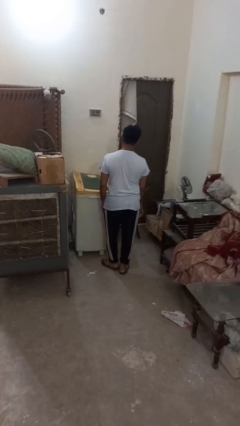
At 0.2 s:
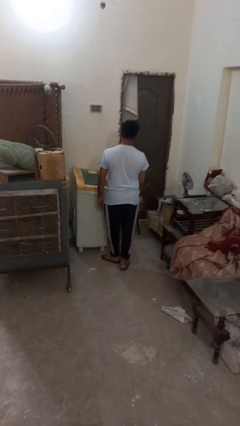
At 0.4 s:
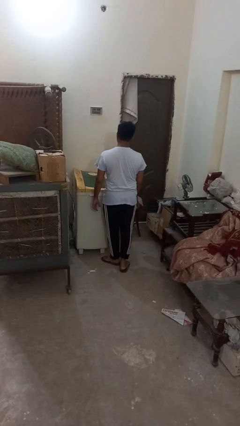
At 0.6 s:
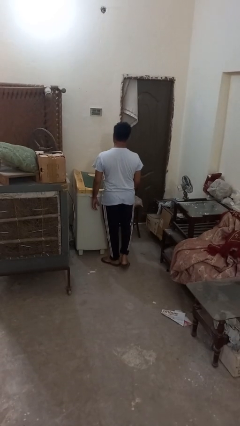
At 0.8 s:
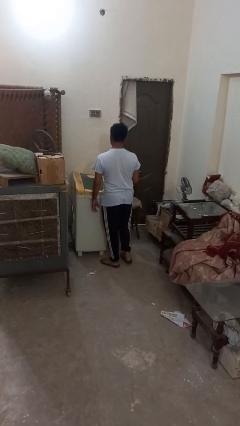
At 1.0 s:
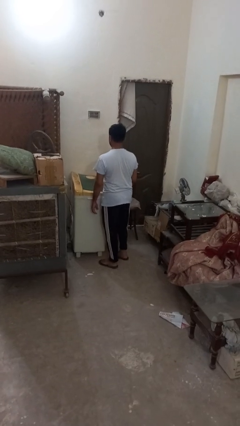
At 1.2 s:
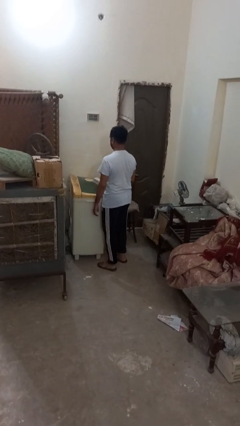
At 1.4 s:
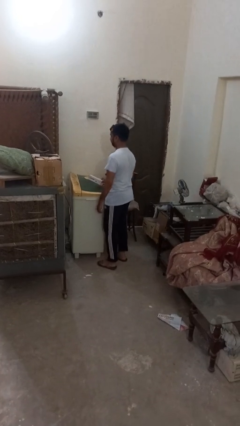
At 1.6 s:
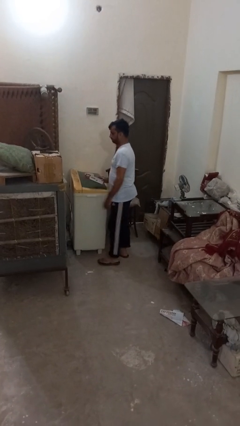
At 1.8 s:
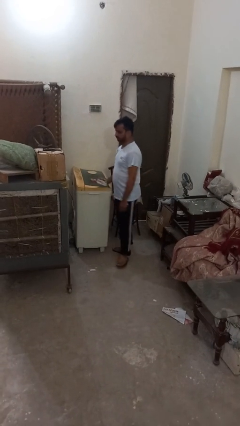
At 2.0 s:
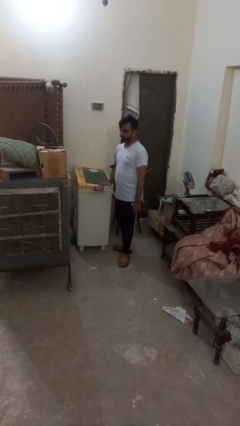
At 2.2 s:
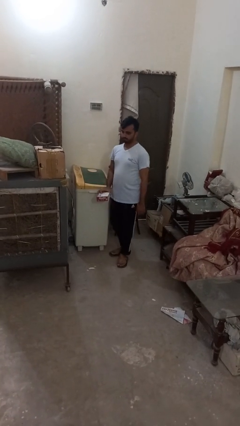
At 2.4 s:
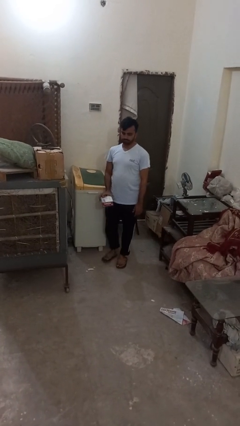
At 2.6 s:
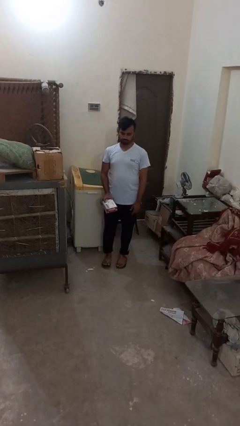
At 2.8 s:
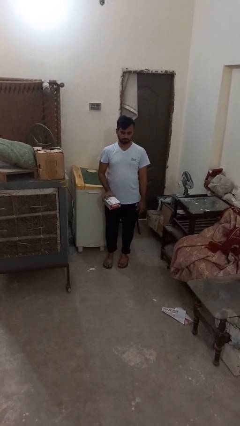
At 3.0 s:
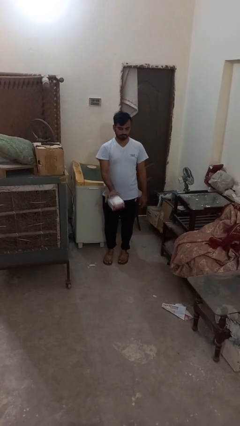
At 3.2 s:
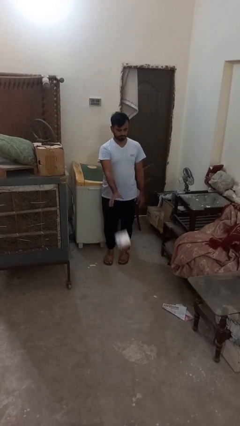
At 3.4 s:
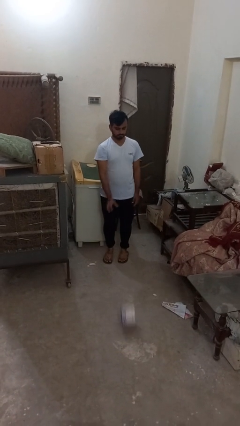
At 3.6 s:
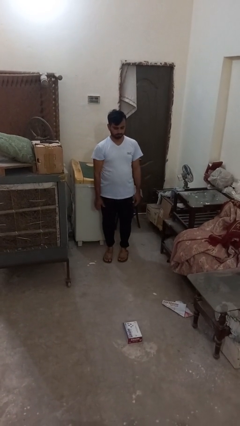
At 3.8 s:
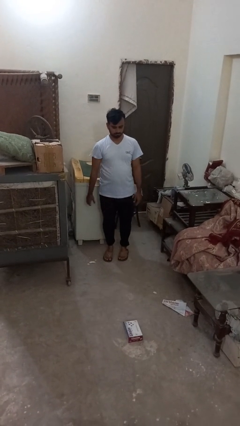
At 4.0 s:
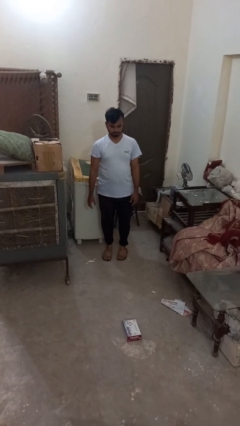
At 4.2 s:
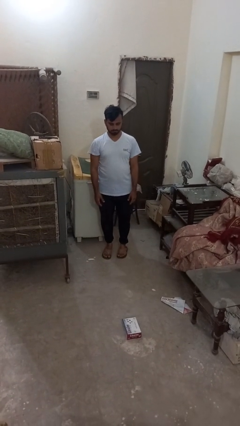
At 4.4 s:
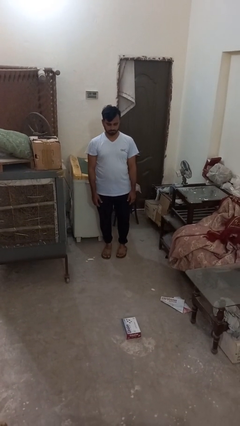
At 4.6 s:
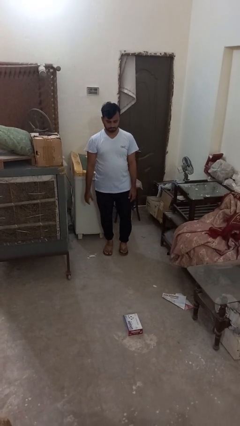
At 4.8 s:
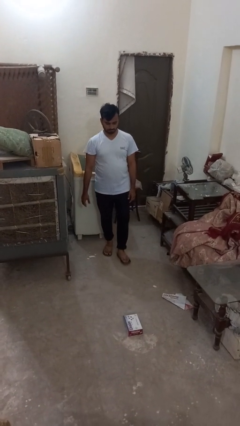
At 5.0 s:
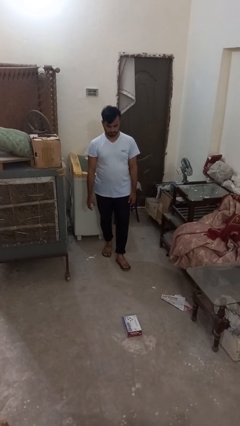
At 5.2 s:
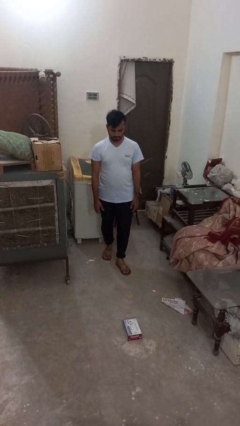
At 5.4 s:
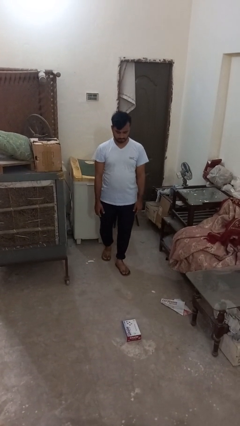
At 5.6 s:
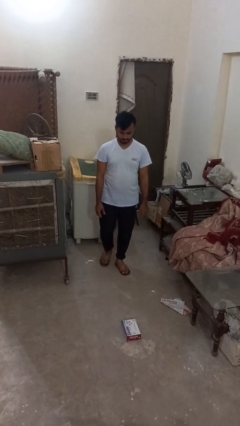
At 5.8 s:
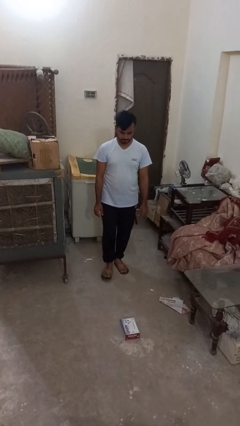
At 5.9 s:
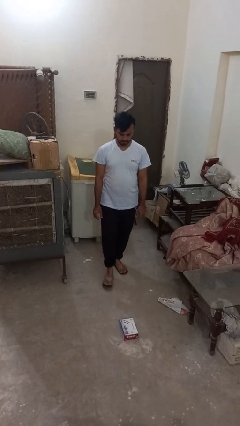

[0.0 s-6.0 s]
person throws object to ground

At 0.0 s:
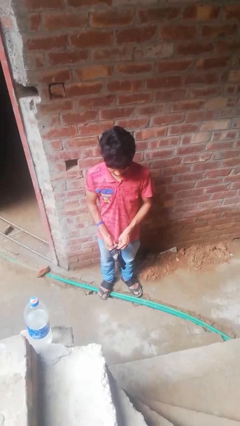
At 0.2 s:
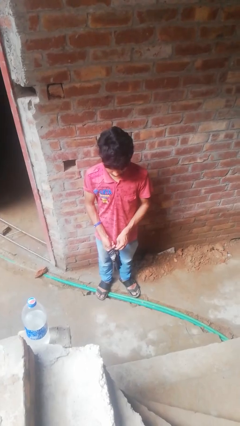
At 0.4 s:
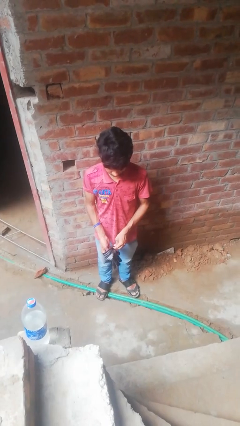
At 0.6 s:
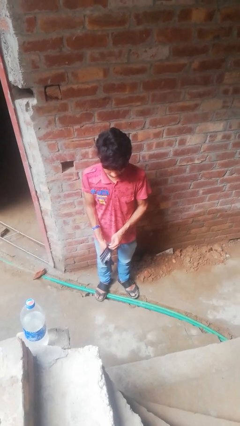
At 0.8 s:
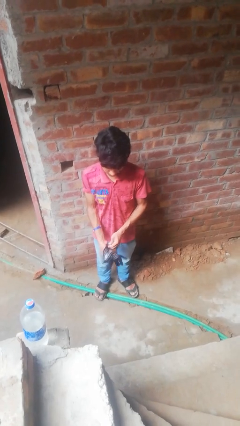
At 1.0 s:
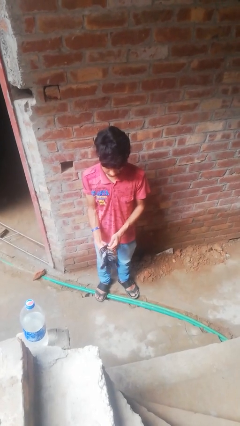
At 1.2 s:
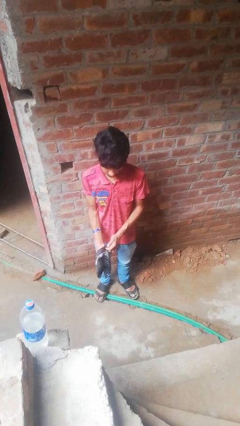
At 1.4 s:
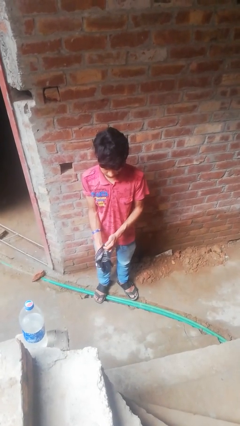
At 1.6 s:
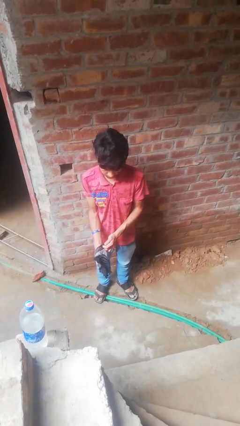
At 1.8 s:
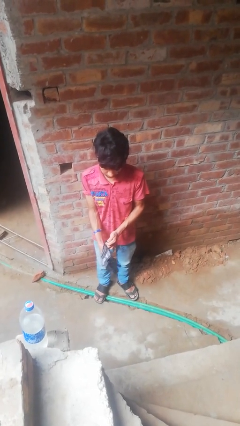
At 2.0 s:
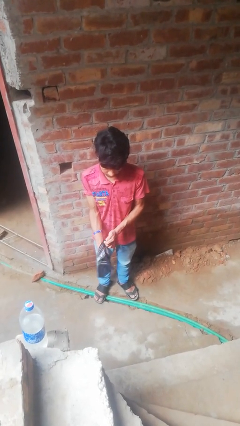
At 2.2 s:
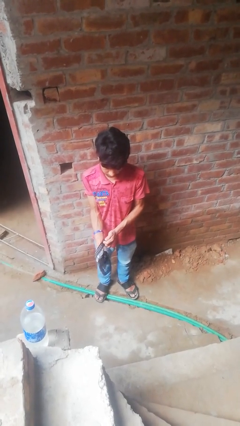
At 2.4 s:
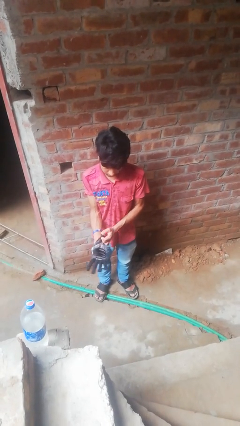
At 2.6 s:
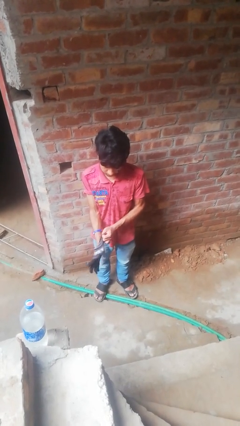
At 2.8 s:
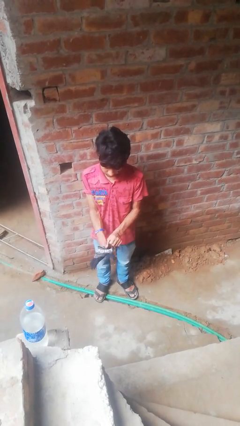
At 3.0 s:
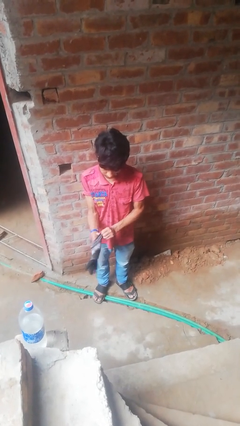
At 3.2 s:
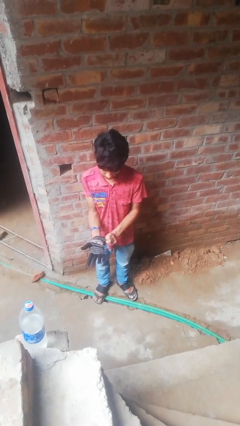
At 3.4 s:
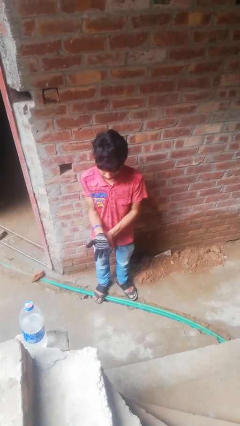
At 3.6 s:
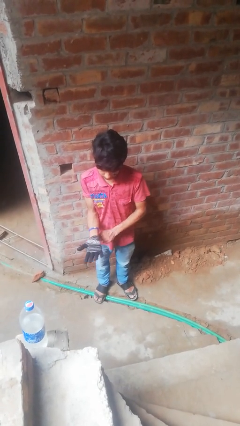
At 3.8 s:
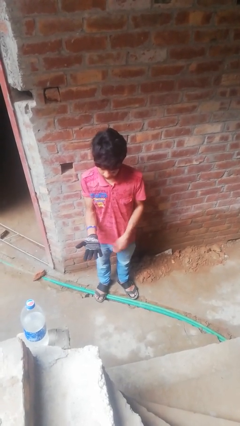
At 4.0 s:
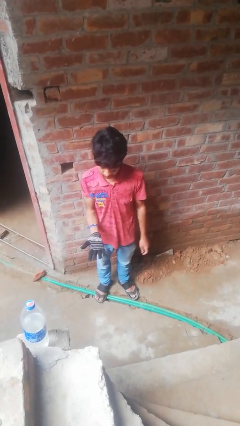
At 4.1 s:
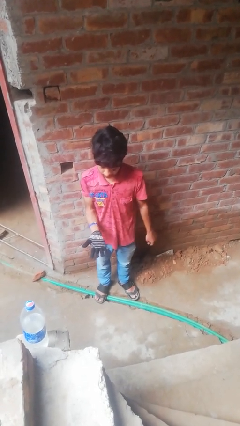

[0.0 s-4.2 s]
person puts on gloves

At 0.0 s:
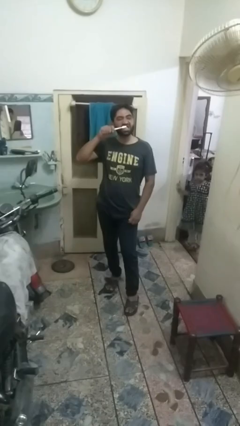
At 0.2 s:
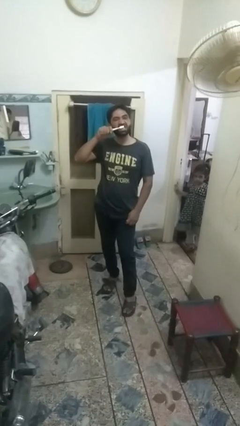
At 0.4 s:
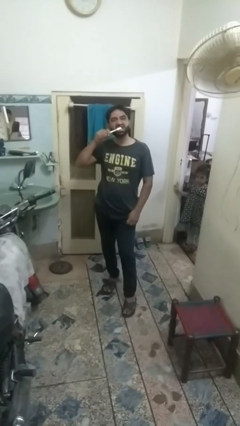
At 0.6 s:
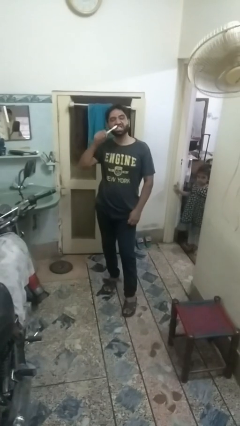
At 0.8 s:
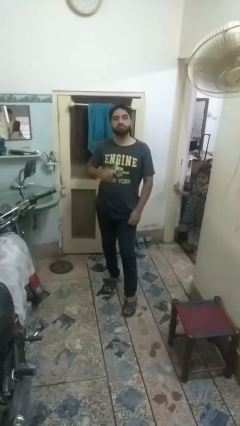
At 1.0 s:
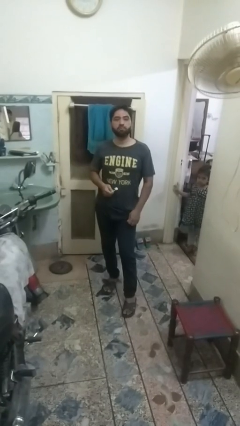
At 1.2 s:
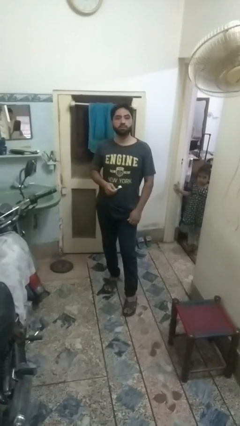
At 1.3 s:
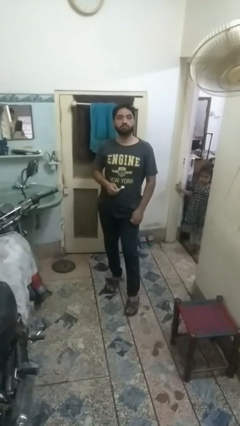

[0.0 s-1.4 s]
person brushes teeth

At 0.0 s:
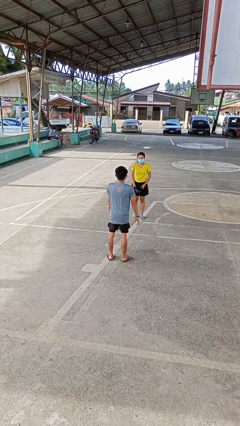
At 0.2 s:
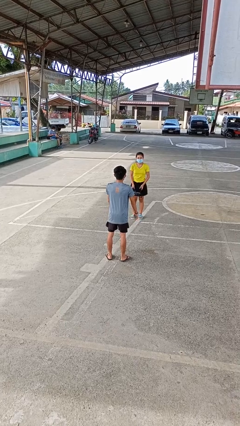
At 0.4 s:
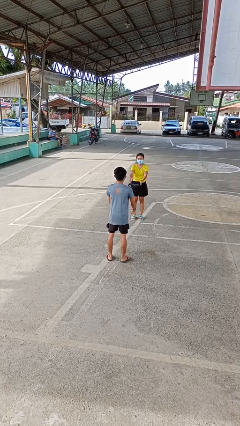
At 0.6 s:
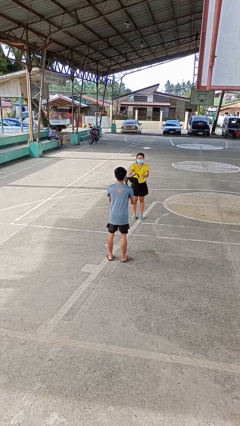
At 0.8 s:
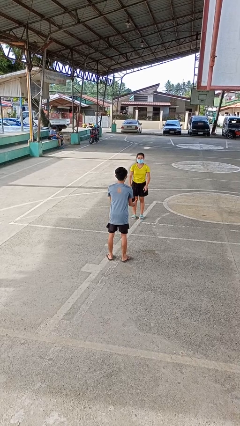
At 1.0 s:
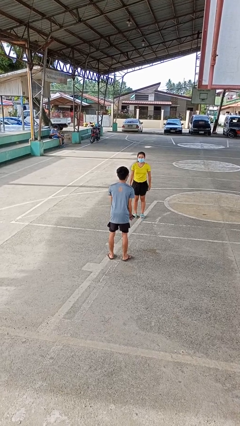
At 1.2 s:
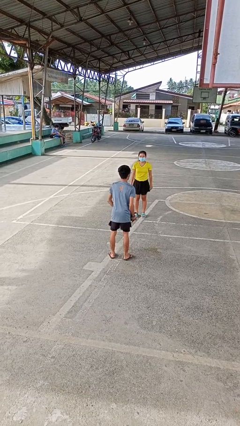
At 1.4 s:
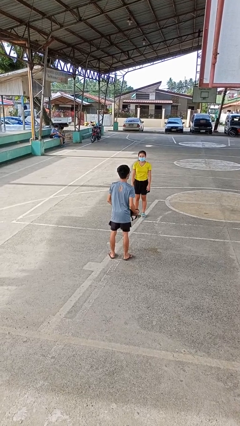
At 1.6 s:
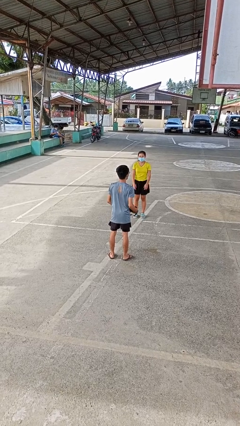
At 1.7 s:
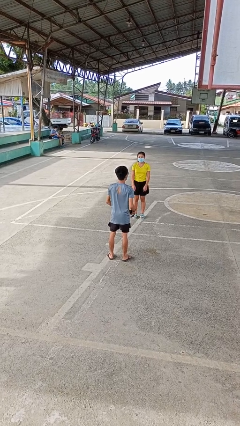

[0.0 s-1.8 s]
person catches object from person

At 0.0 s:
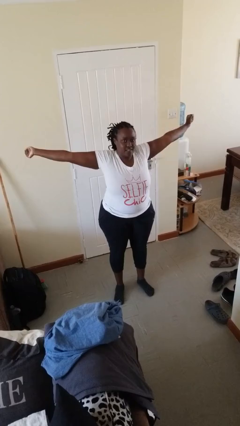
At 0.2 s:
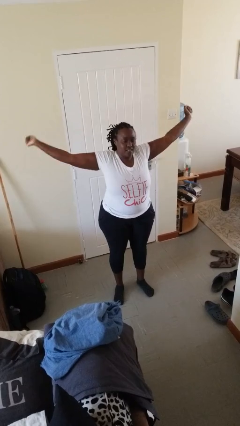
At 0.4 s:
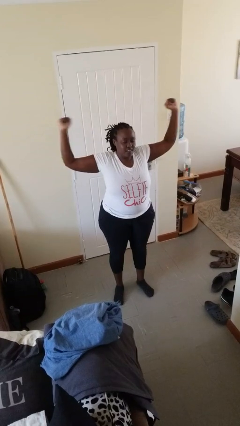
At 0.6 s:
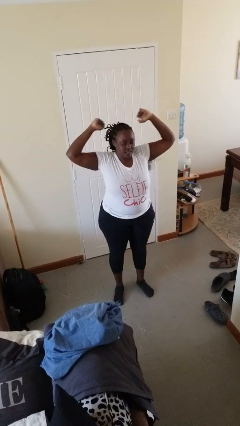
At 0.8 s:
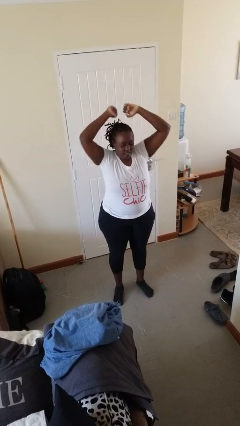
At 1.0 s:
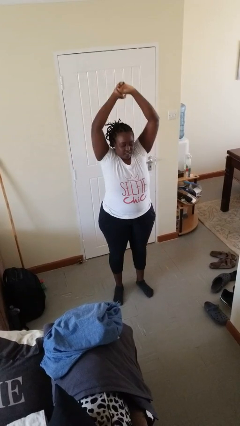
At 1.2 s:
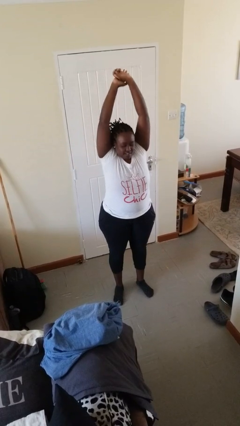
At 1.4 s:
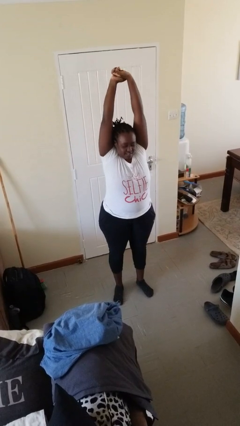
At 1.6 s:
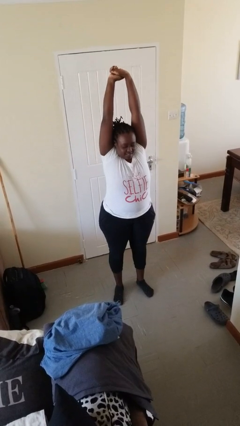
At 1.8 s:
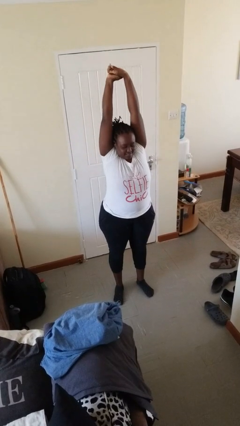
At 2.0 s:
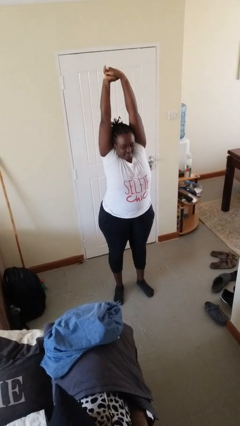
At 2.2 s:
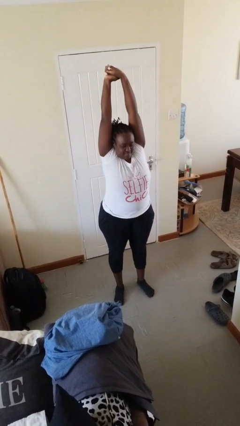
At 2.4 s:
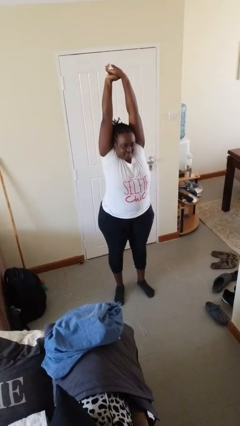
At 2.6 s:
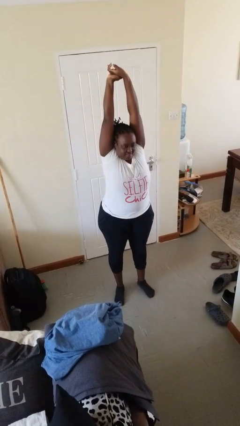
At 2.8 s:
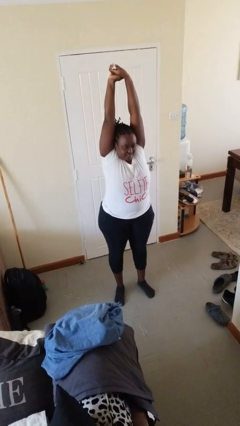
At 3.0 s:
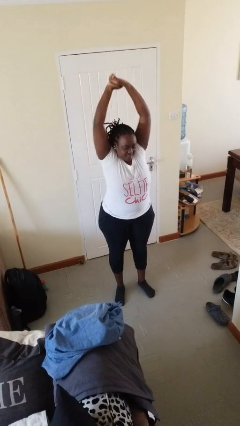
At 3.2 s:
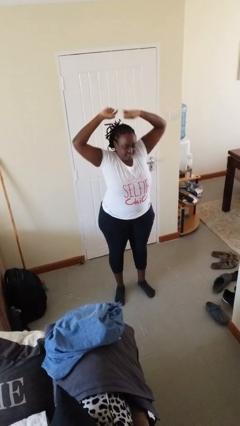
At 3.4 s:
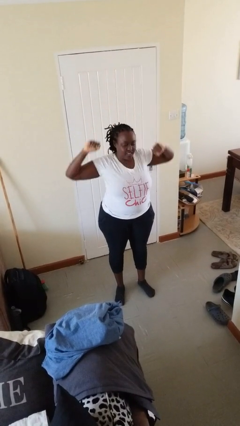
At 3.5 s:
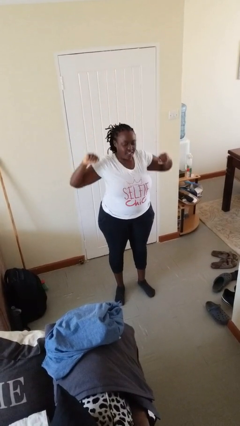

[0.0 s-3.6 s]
person stretches arms over head
